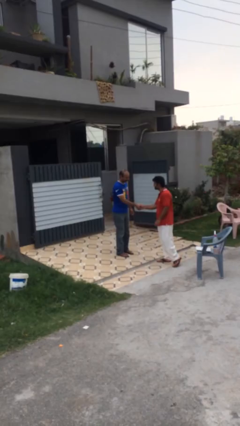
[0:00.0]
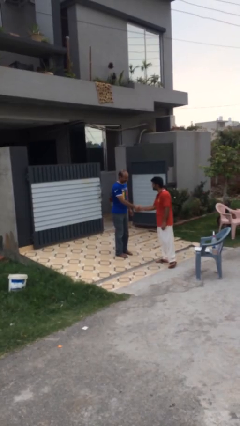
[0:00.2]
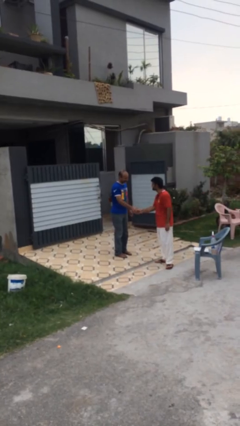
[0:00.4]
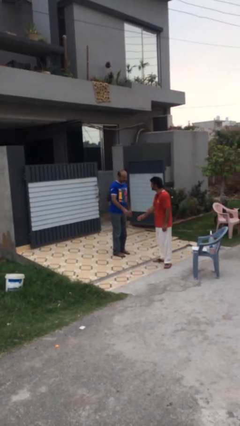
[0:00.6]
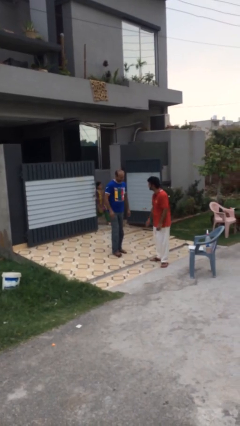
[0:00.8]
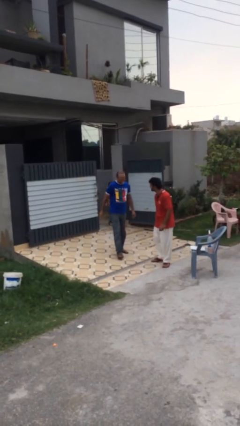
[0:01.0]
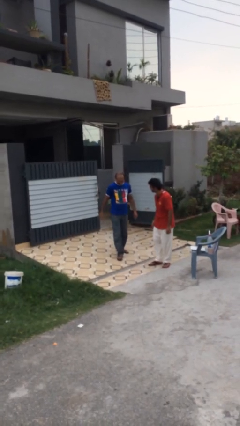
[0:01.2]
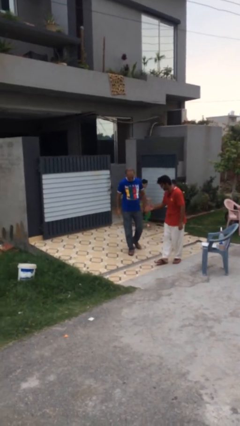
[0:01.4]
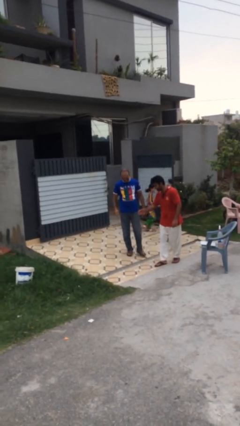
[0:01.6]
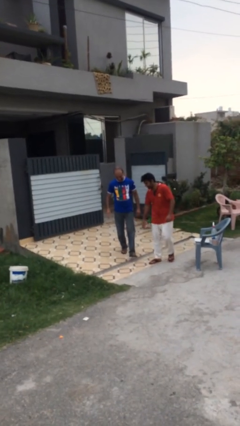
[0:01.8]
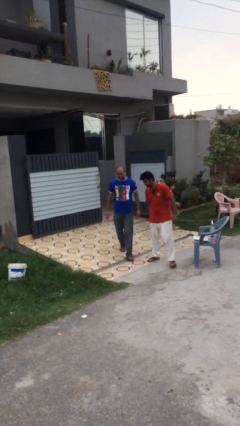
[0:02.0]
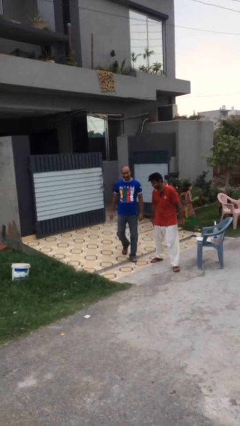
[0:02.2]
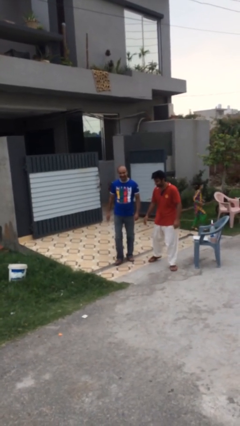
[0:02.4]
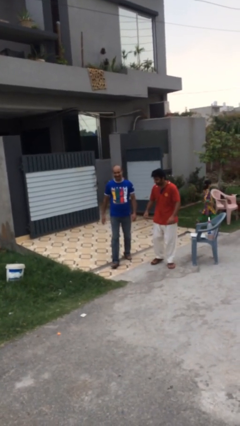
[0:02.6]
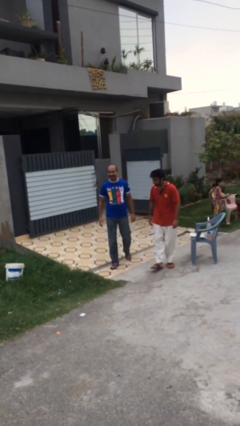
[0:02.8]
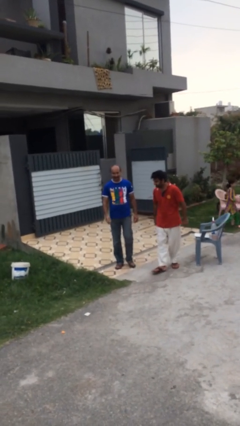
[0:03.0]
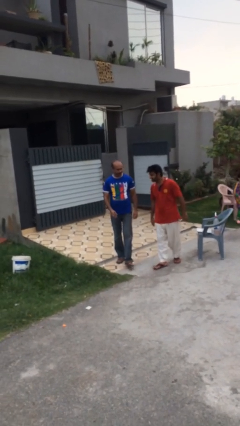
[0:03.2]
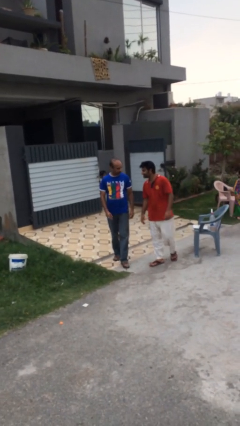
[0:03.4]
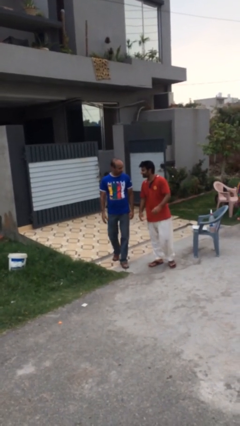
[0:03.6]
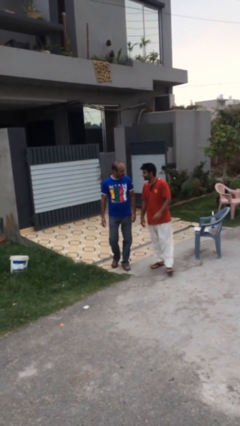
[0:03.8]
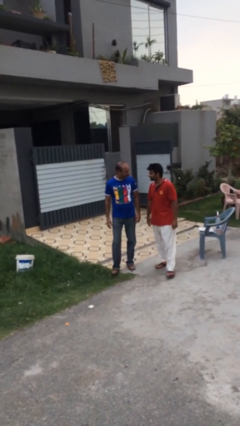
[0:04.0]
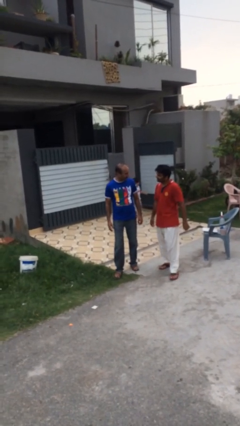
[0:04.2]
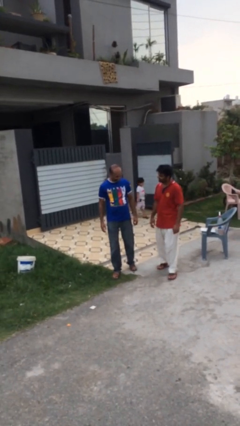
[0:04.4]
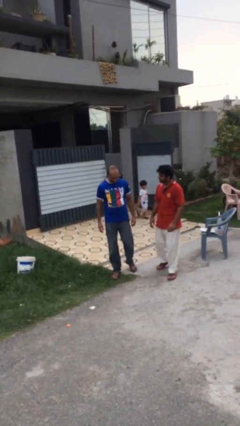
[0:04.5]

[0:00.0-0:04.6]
person talks to person

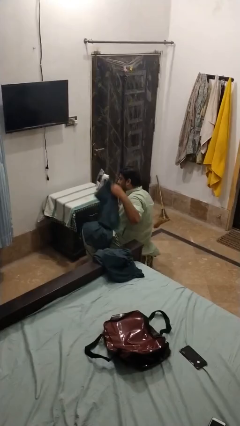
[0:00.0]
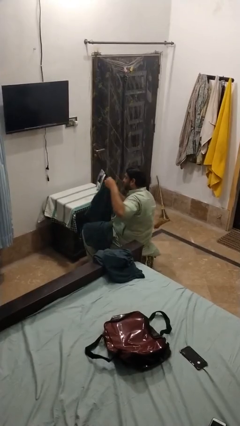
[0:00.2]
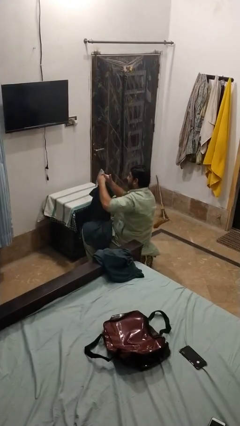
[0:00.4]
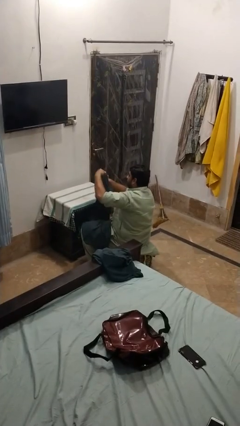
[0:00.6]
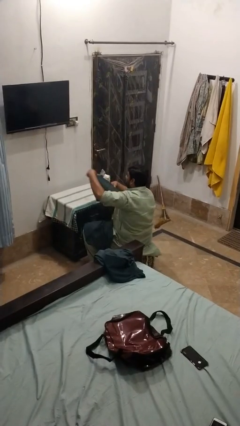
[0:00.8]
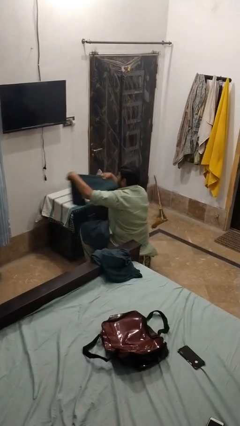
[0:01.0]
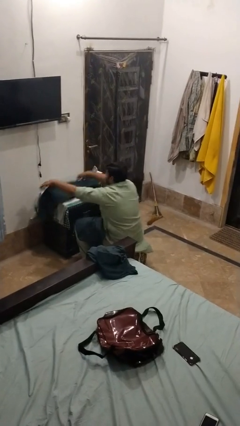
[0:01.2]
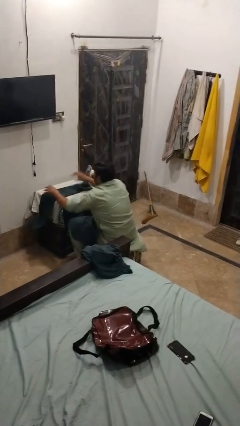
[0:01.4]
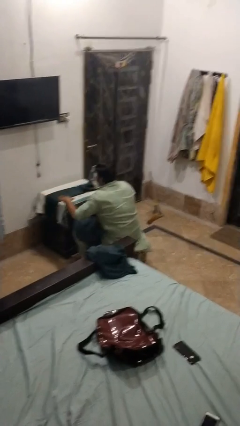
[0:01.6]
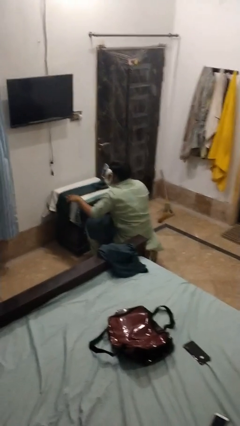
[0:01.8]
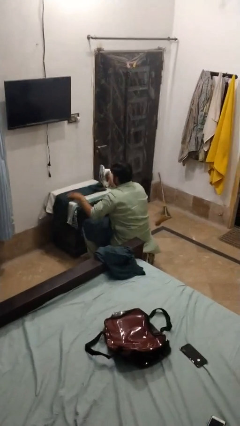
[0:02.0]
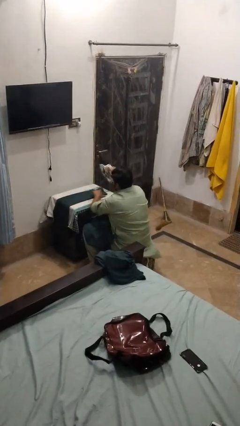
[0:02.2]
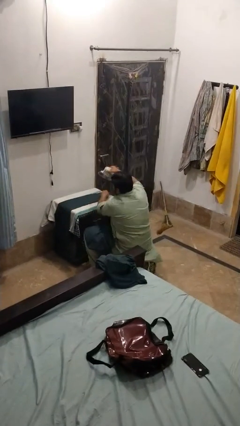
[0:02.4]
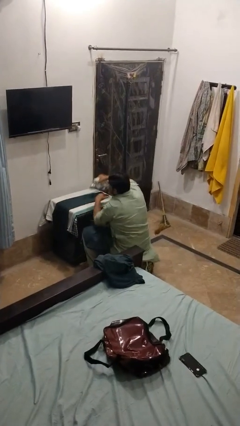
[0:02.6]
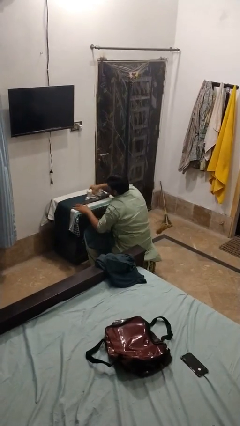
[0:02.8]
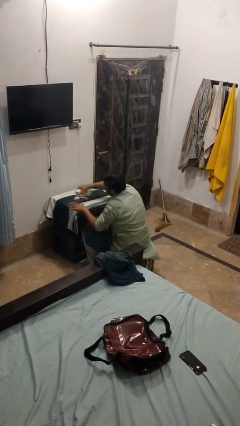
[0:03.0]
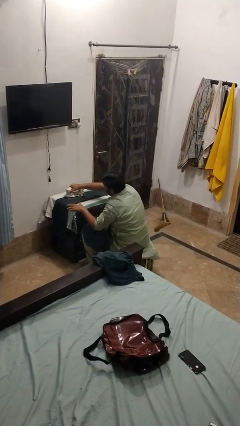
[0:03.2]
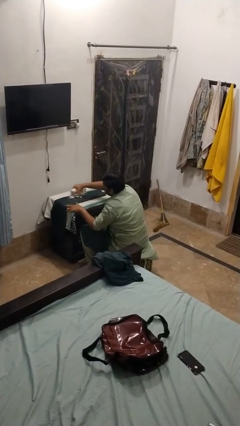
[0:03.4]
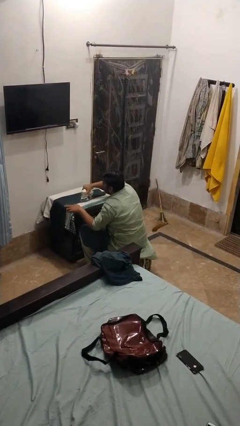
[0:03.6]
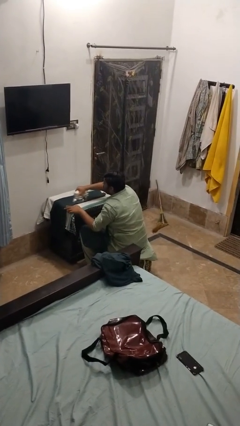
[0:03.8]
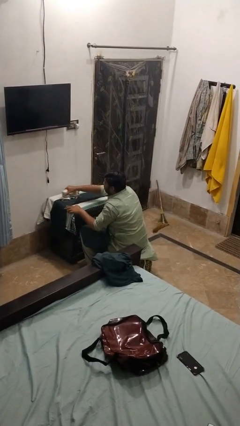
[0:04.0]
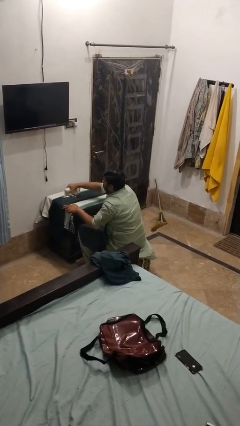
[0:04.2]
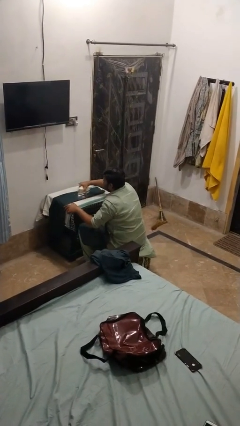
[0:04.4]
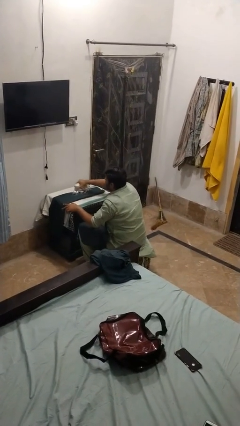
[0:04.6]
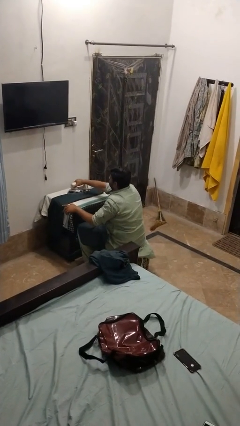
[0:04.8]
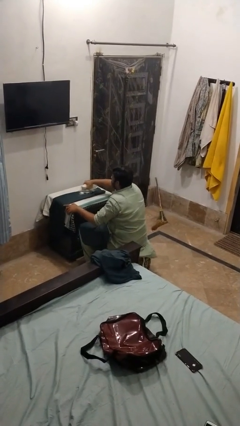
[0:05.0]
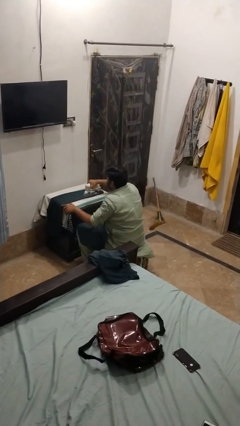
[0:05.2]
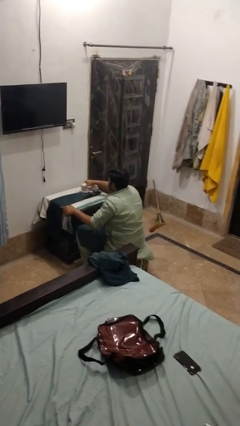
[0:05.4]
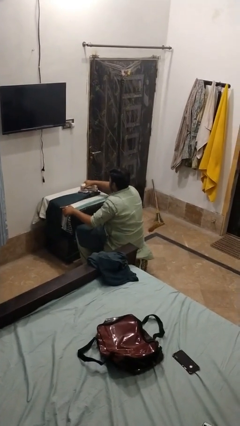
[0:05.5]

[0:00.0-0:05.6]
person irons clothes

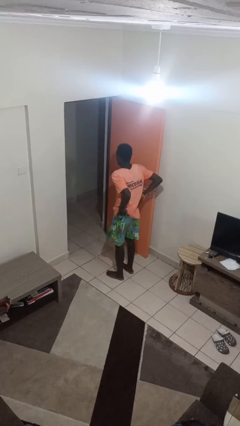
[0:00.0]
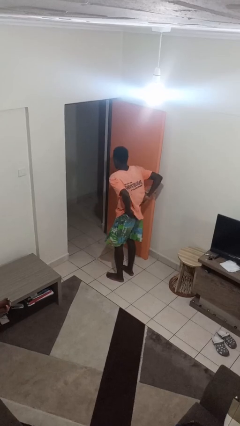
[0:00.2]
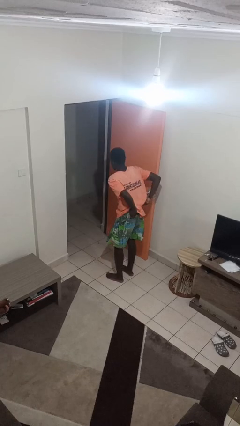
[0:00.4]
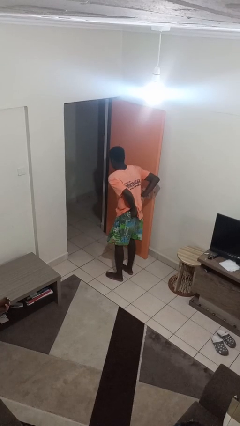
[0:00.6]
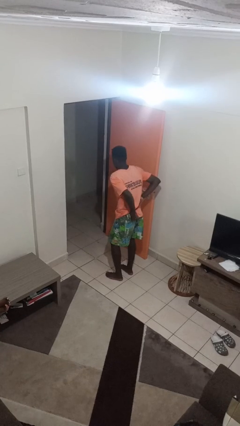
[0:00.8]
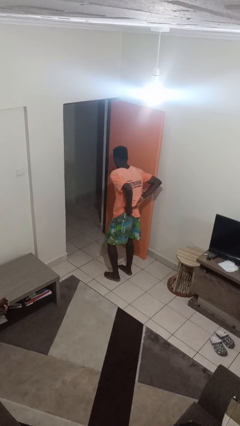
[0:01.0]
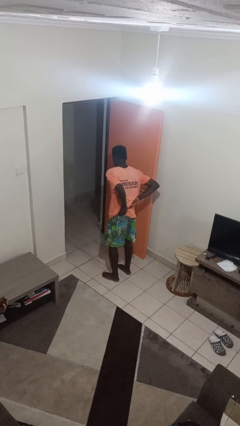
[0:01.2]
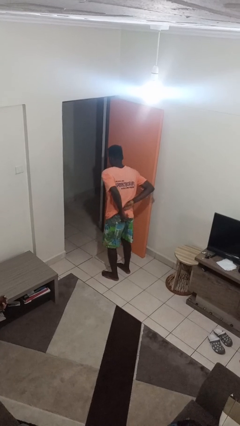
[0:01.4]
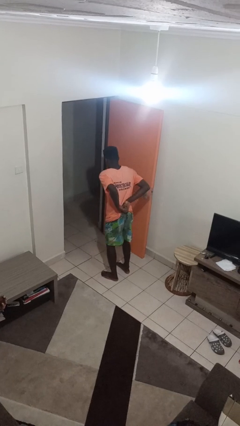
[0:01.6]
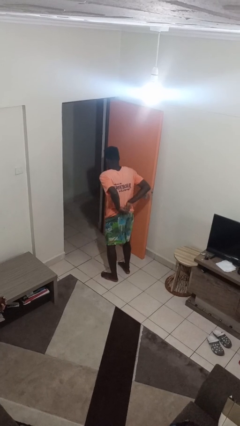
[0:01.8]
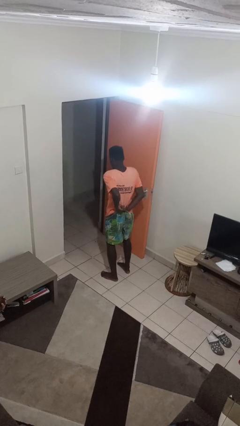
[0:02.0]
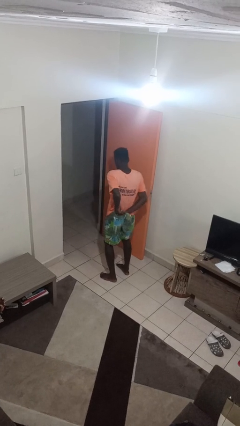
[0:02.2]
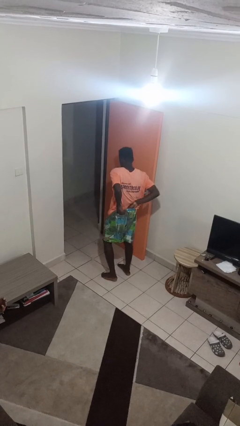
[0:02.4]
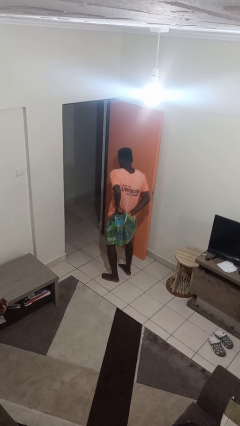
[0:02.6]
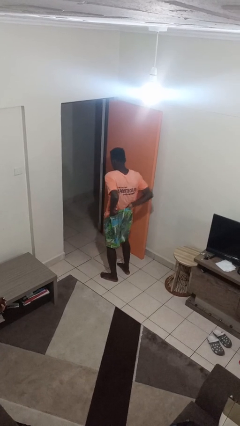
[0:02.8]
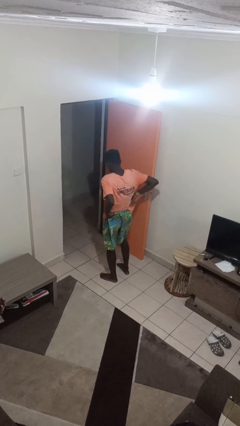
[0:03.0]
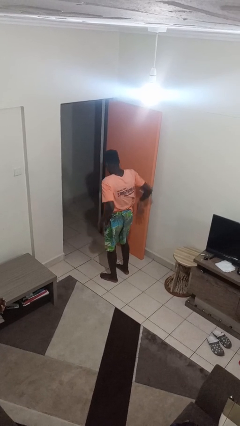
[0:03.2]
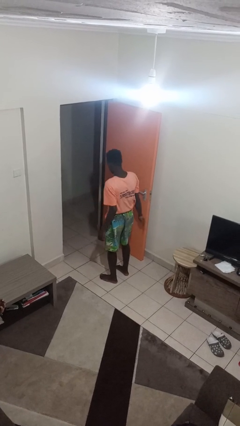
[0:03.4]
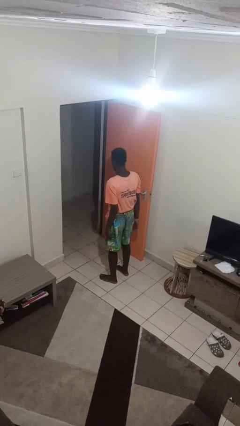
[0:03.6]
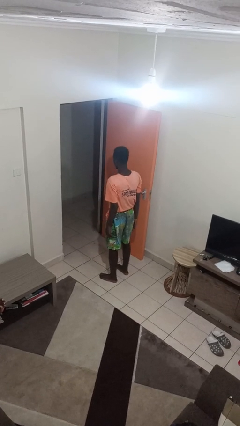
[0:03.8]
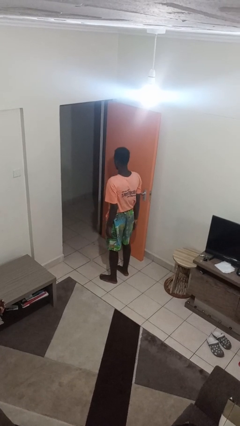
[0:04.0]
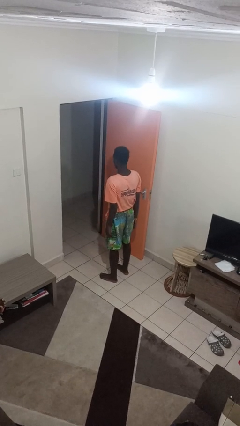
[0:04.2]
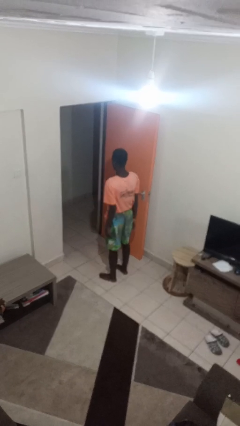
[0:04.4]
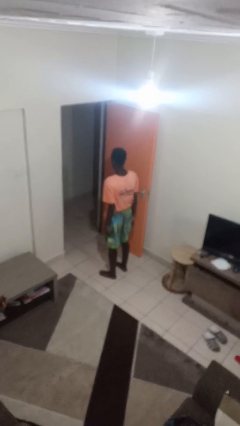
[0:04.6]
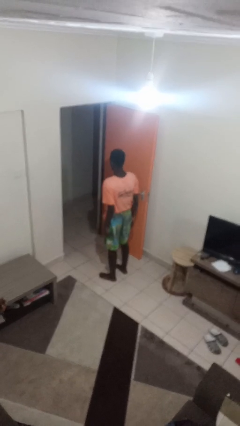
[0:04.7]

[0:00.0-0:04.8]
person tucks in shirt

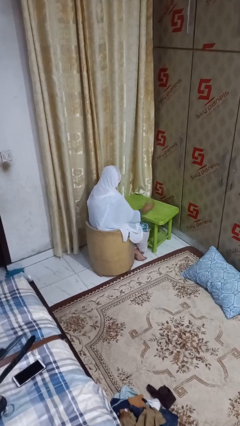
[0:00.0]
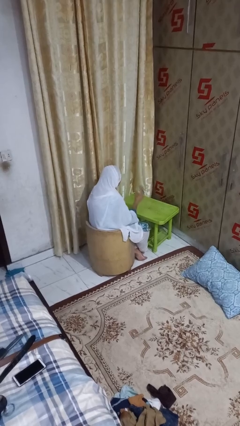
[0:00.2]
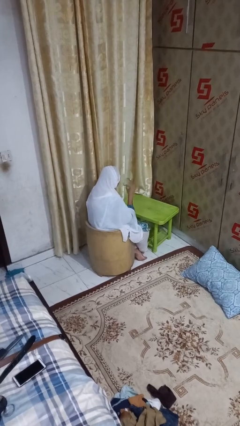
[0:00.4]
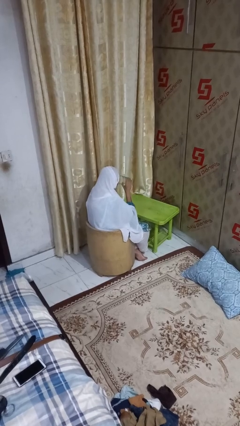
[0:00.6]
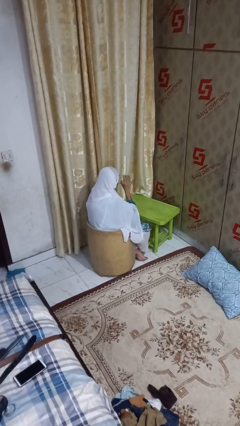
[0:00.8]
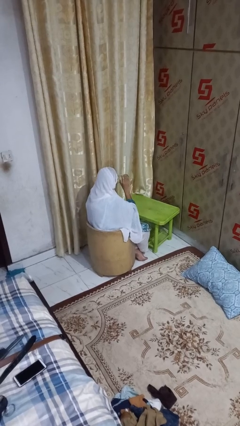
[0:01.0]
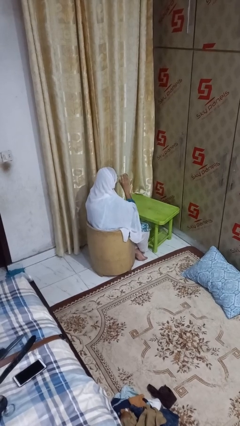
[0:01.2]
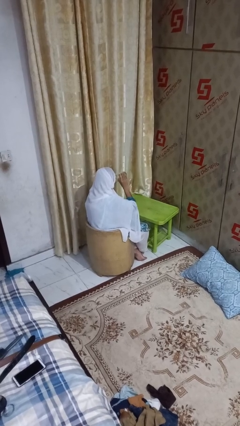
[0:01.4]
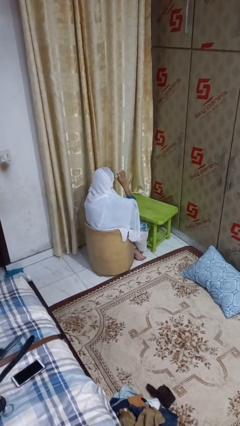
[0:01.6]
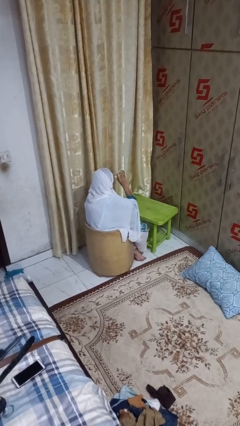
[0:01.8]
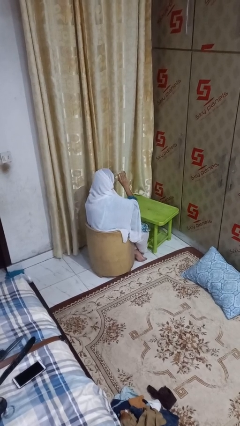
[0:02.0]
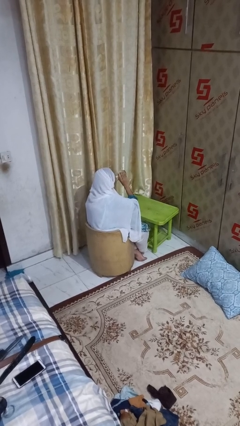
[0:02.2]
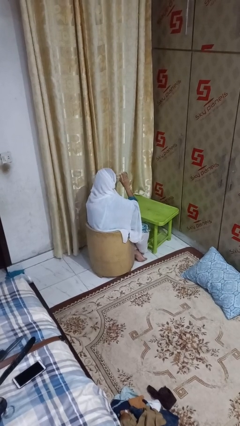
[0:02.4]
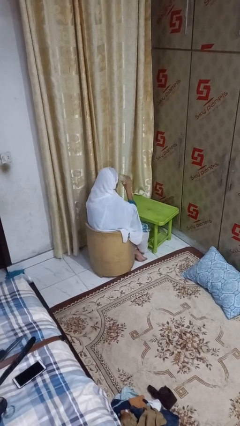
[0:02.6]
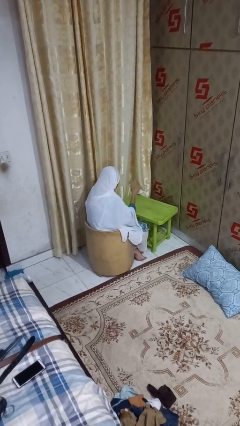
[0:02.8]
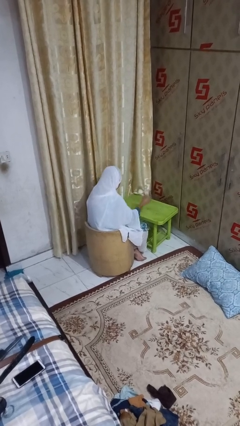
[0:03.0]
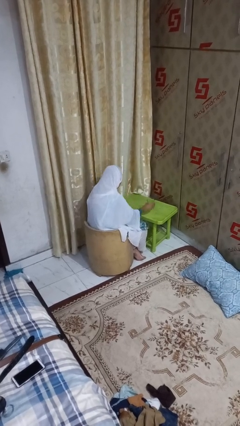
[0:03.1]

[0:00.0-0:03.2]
person drinks from cup
